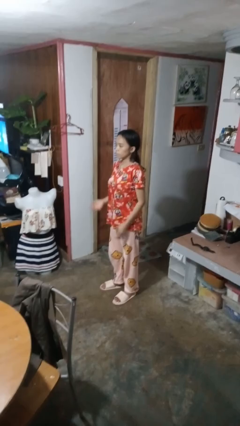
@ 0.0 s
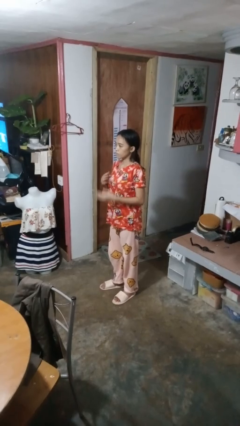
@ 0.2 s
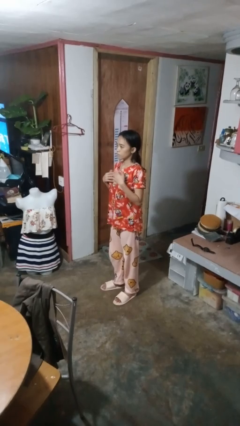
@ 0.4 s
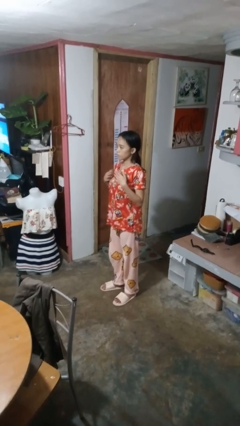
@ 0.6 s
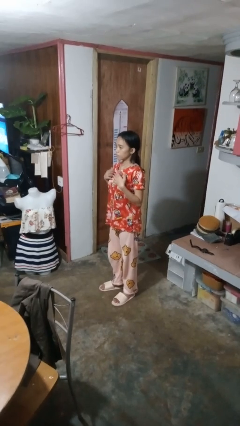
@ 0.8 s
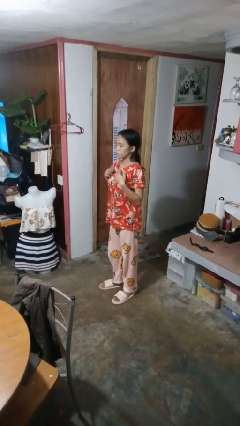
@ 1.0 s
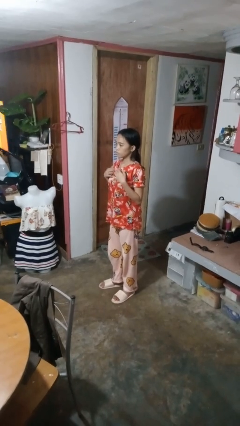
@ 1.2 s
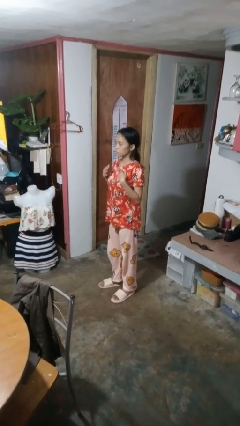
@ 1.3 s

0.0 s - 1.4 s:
person drums on chest

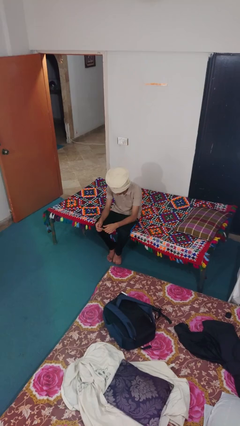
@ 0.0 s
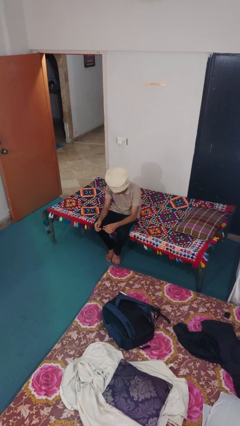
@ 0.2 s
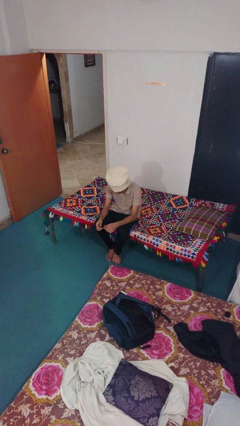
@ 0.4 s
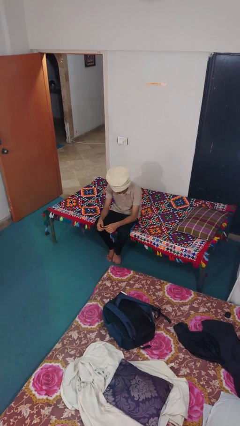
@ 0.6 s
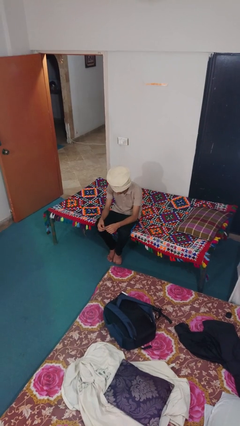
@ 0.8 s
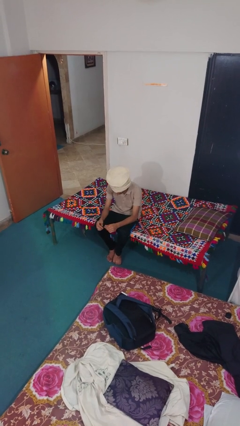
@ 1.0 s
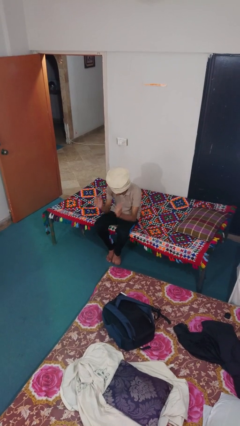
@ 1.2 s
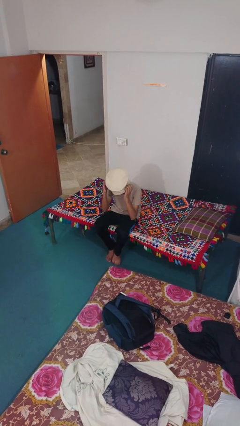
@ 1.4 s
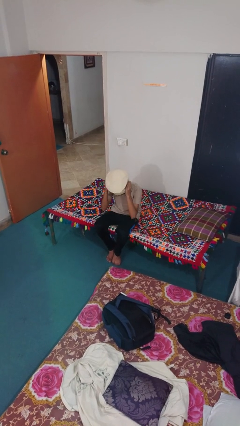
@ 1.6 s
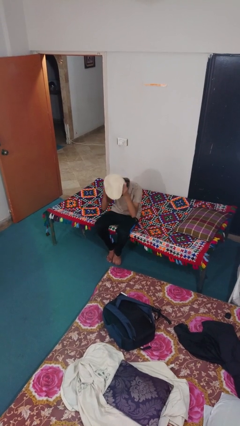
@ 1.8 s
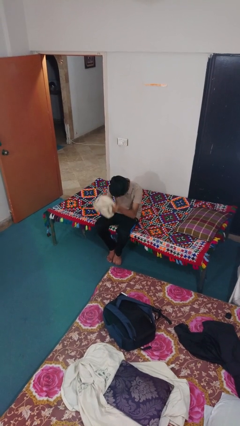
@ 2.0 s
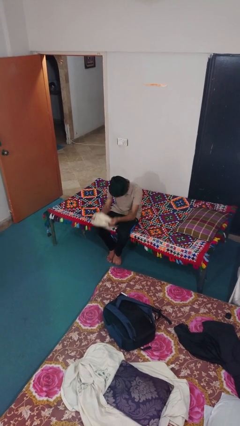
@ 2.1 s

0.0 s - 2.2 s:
person takes off hat

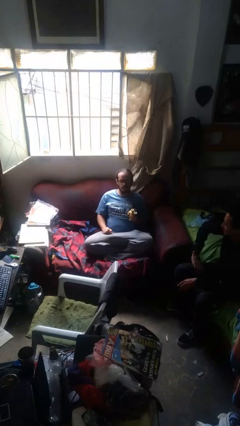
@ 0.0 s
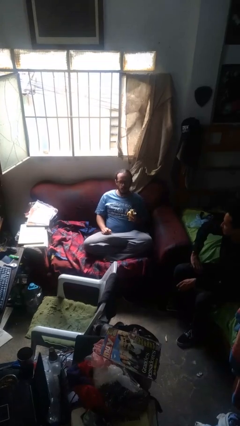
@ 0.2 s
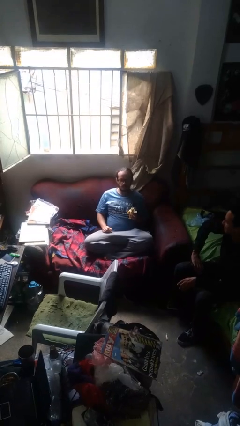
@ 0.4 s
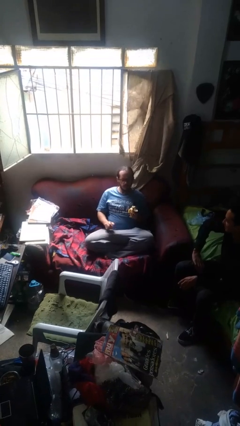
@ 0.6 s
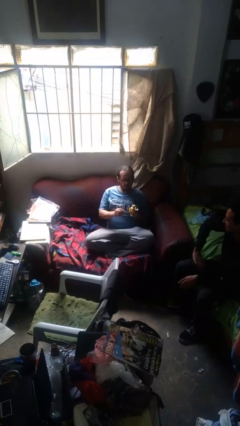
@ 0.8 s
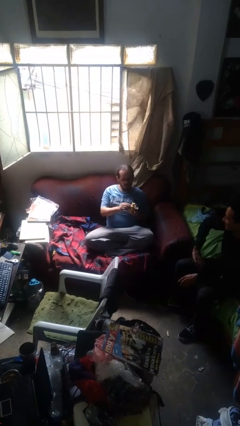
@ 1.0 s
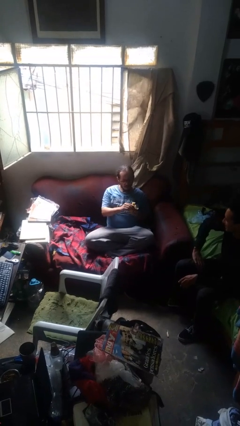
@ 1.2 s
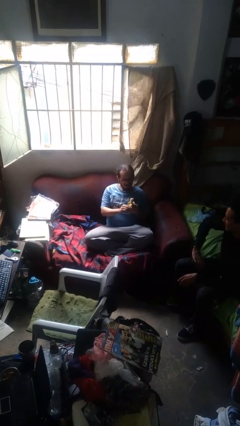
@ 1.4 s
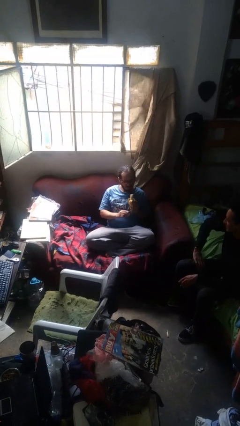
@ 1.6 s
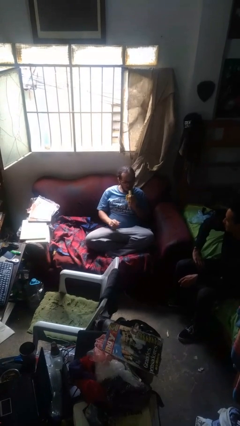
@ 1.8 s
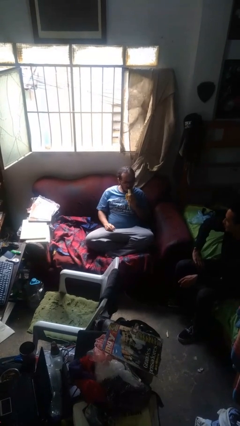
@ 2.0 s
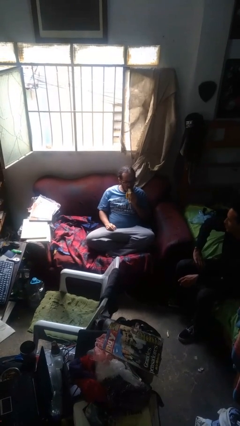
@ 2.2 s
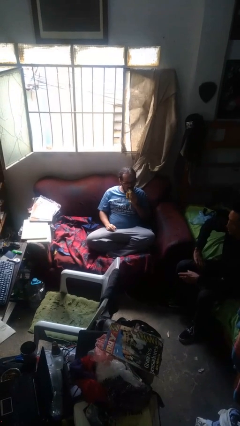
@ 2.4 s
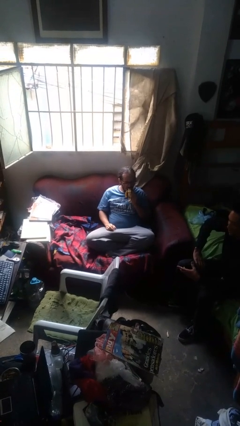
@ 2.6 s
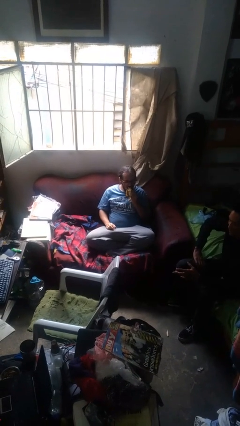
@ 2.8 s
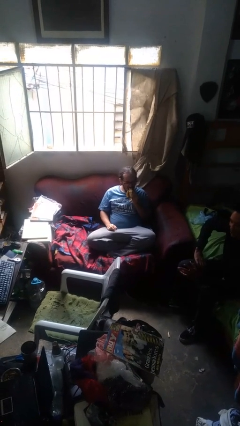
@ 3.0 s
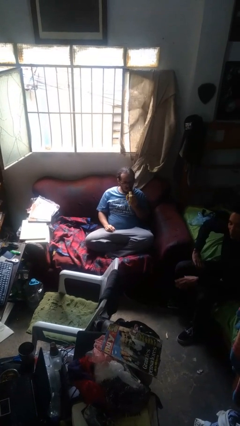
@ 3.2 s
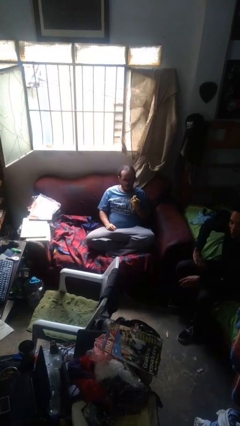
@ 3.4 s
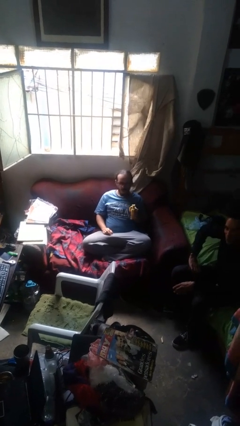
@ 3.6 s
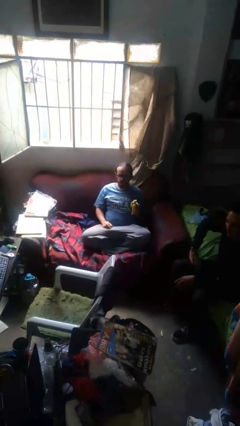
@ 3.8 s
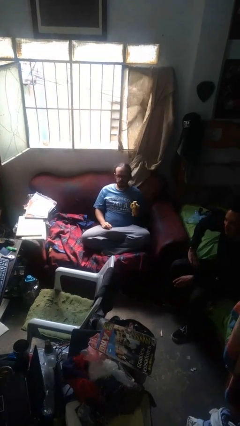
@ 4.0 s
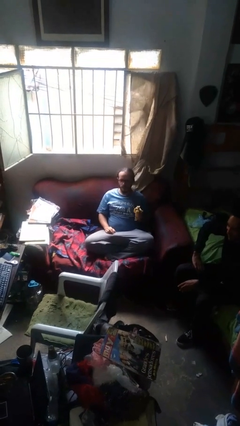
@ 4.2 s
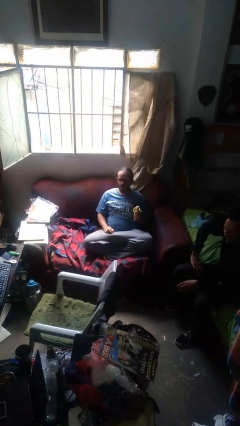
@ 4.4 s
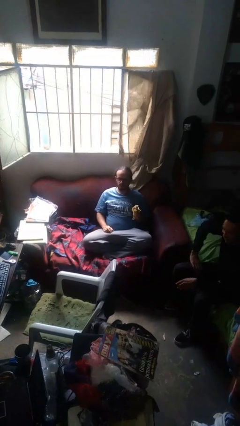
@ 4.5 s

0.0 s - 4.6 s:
person eats banana

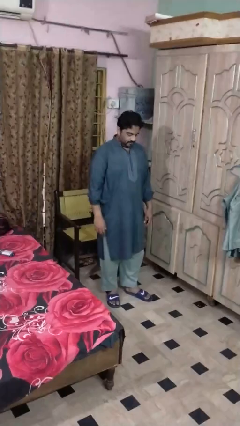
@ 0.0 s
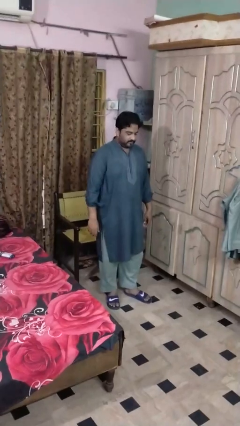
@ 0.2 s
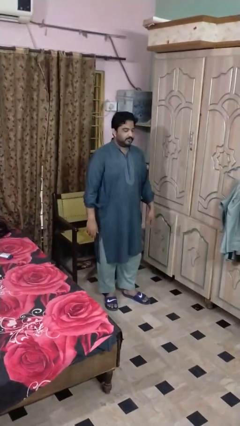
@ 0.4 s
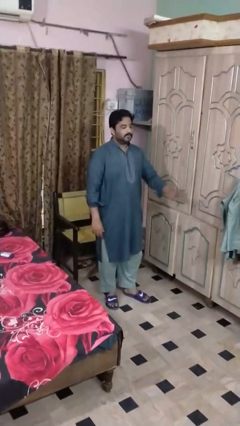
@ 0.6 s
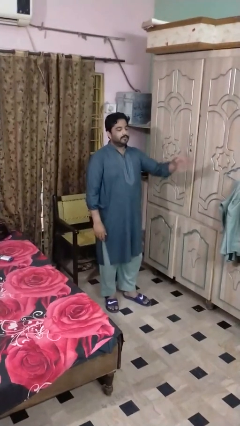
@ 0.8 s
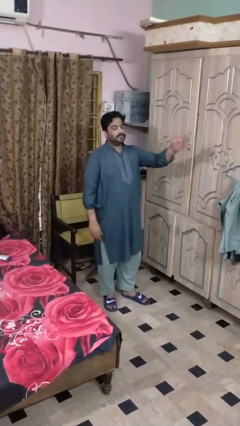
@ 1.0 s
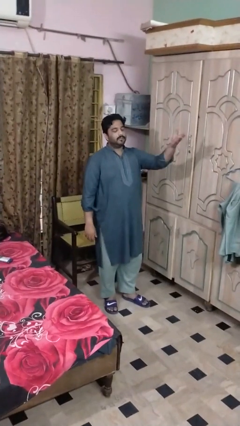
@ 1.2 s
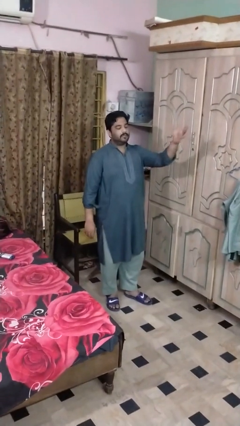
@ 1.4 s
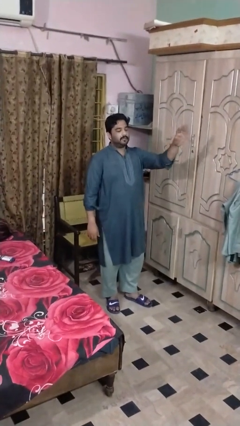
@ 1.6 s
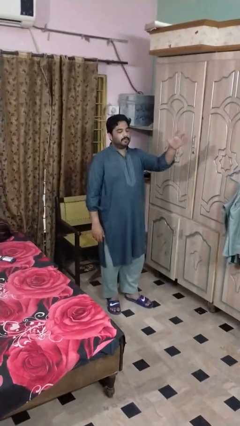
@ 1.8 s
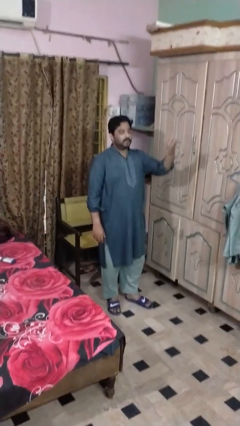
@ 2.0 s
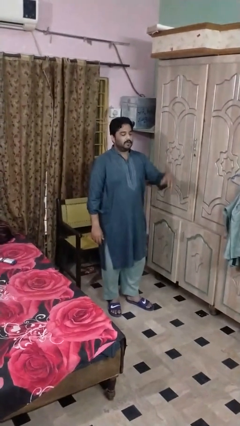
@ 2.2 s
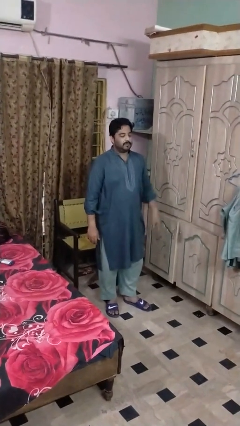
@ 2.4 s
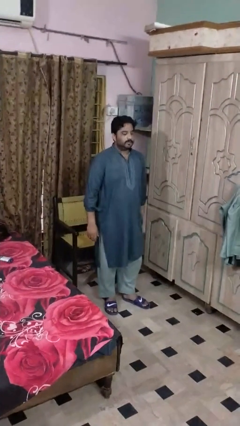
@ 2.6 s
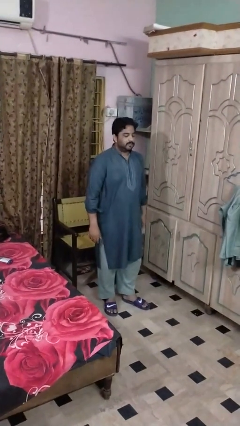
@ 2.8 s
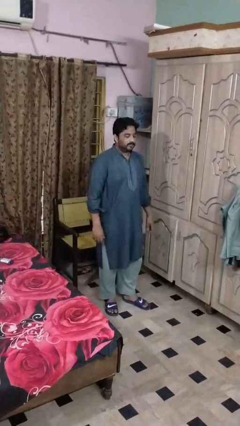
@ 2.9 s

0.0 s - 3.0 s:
person shakes head

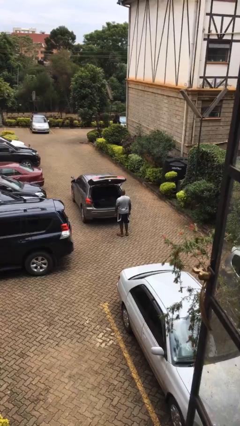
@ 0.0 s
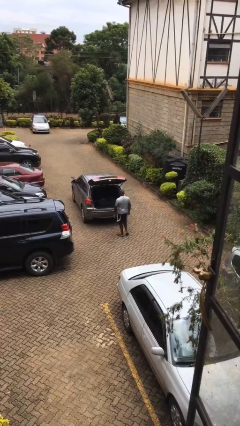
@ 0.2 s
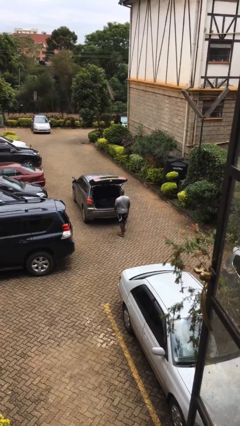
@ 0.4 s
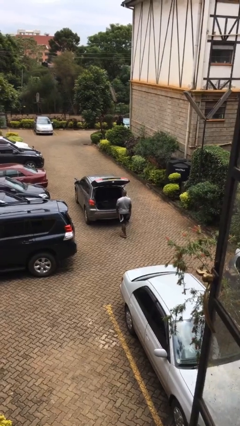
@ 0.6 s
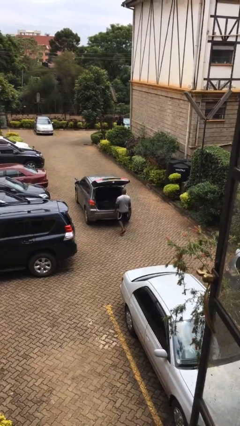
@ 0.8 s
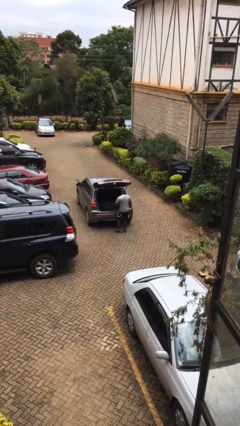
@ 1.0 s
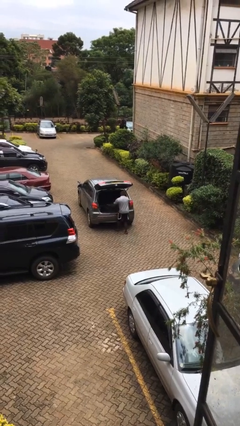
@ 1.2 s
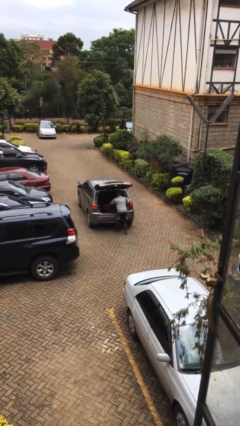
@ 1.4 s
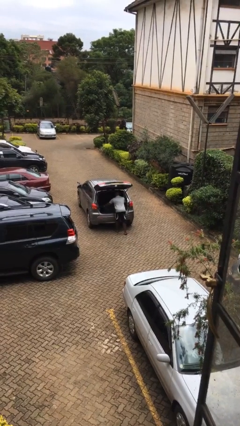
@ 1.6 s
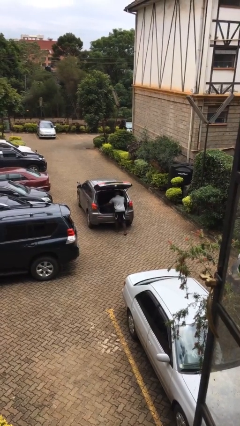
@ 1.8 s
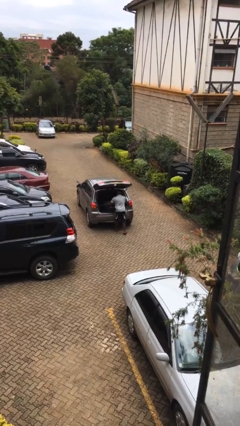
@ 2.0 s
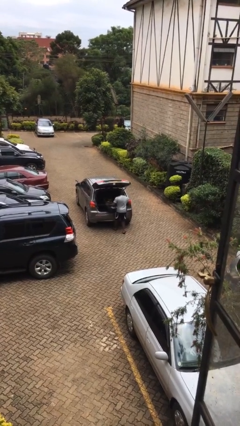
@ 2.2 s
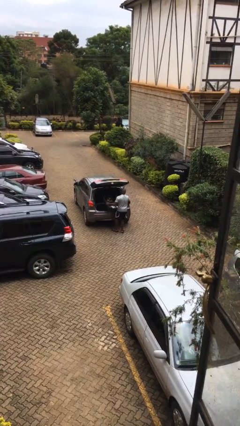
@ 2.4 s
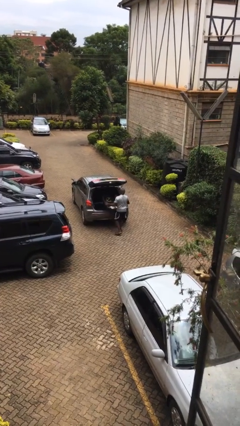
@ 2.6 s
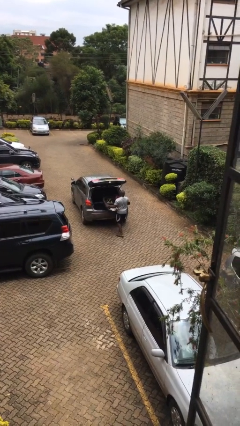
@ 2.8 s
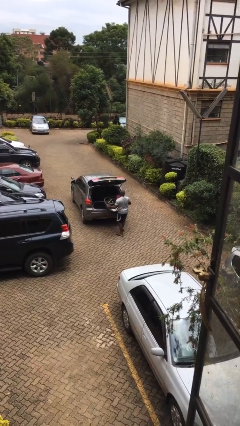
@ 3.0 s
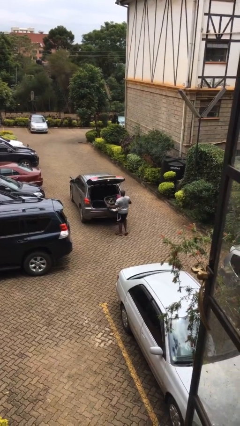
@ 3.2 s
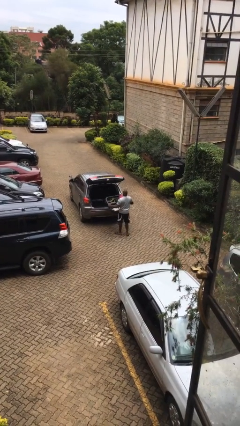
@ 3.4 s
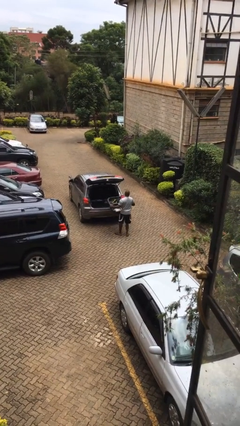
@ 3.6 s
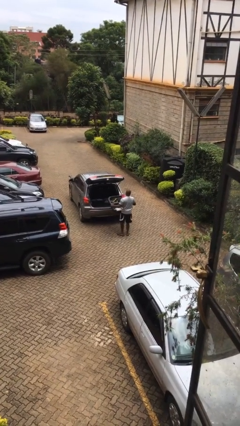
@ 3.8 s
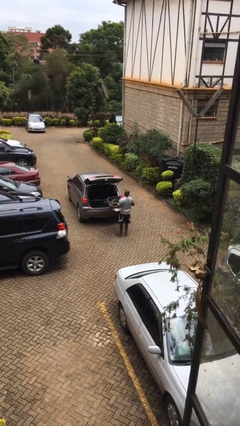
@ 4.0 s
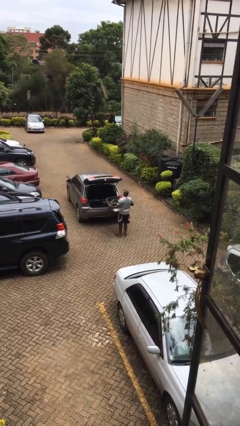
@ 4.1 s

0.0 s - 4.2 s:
person unloads car

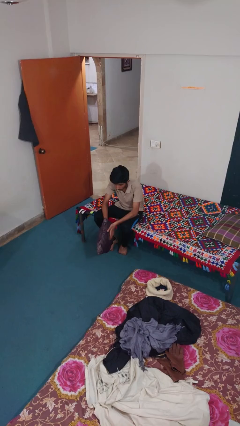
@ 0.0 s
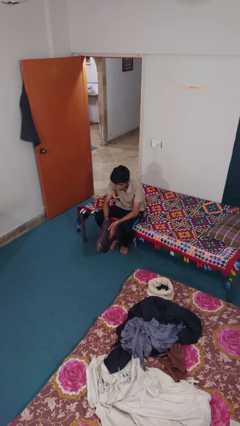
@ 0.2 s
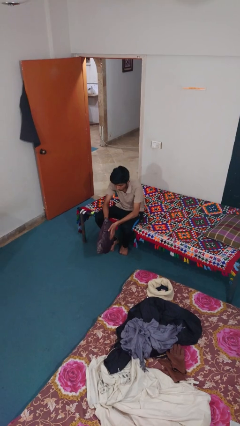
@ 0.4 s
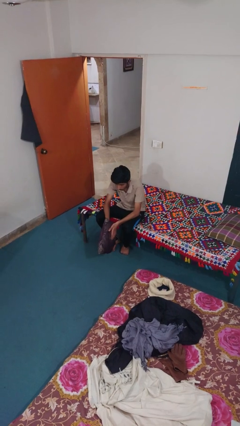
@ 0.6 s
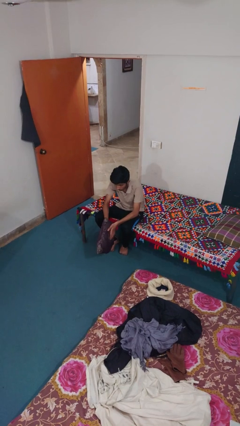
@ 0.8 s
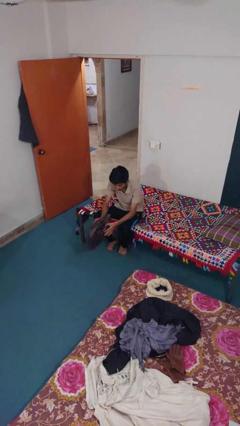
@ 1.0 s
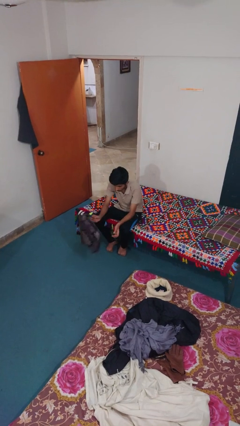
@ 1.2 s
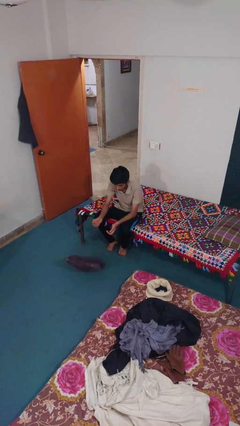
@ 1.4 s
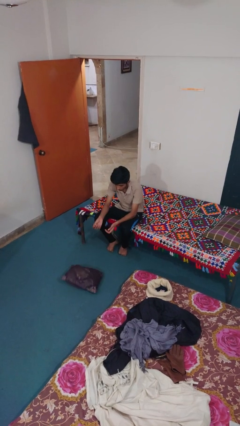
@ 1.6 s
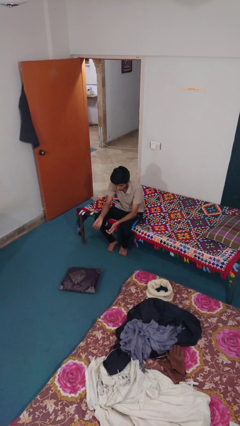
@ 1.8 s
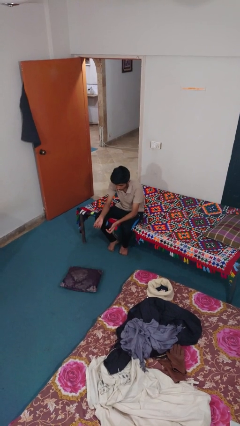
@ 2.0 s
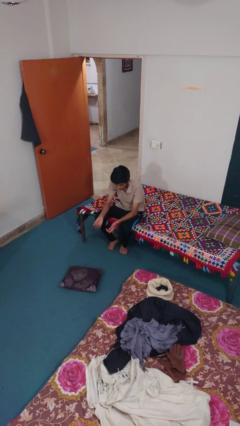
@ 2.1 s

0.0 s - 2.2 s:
person drops object

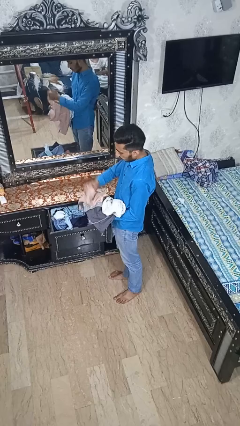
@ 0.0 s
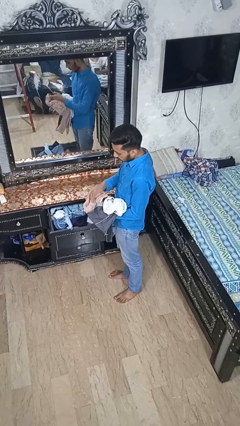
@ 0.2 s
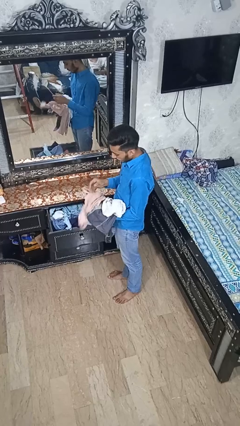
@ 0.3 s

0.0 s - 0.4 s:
person takes clothes from dresser
